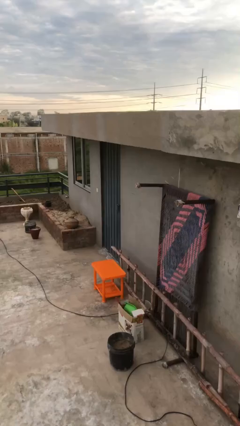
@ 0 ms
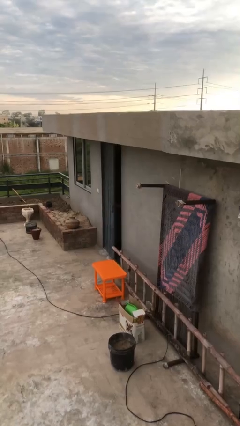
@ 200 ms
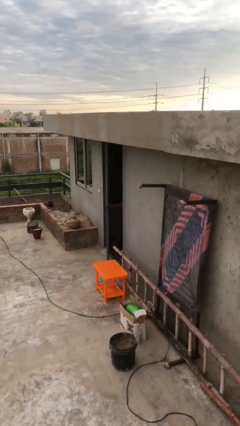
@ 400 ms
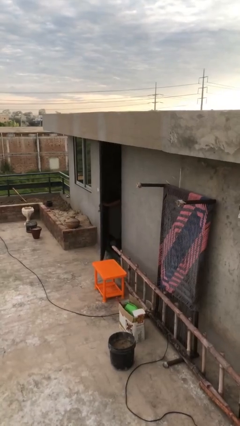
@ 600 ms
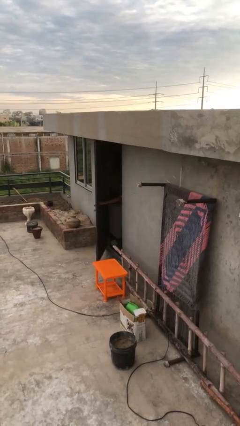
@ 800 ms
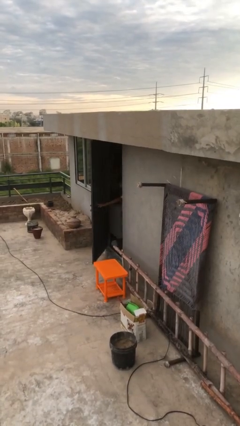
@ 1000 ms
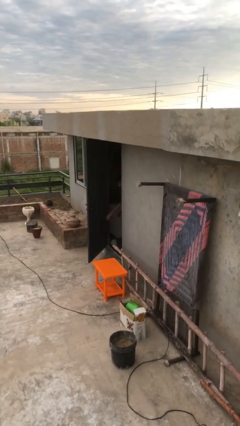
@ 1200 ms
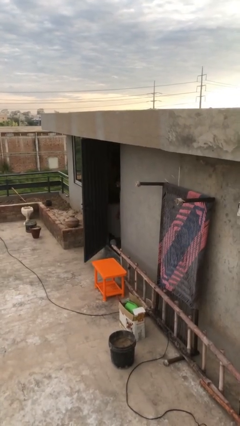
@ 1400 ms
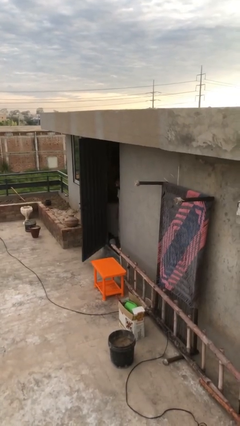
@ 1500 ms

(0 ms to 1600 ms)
person opens facility door

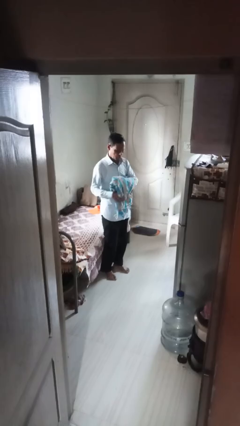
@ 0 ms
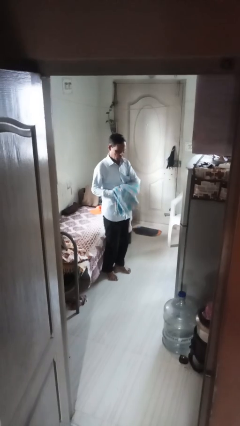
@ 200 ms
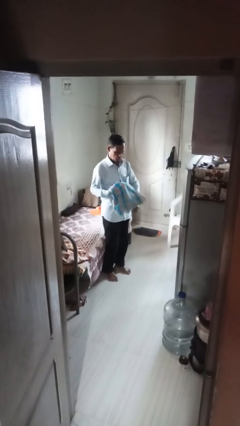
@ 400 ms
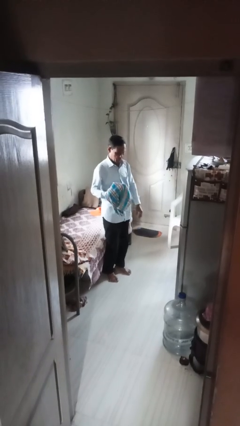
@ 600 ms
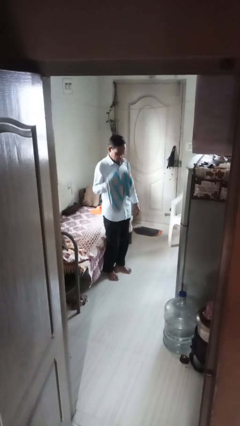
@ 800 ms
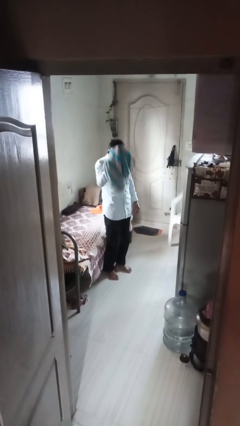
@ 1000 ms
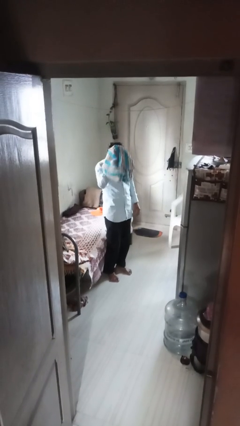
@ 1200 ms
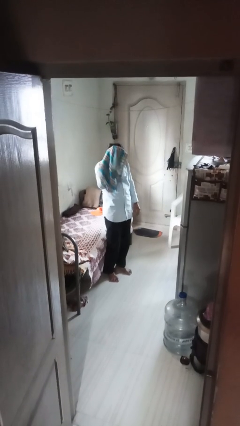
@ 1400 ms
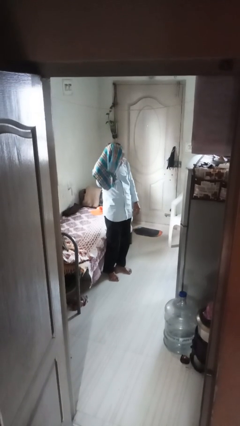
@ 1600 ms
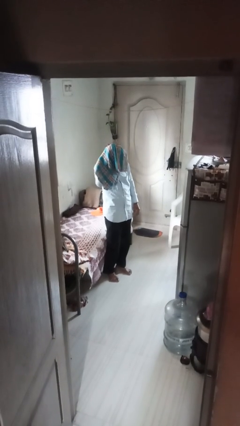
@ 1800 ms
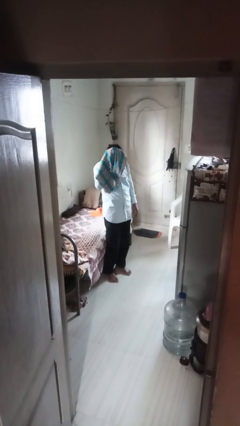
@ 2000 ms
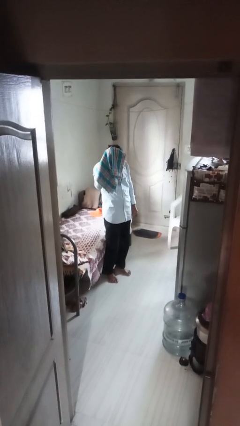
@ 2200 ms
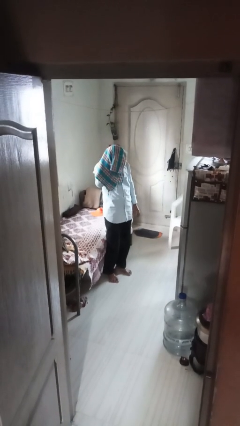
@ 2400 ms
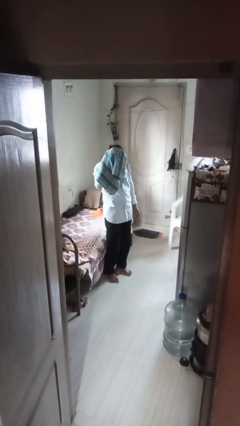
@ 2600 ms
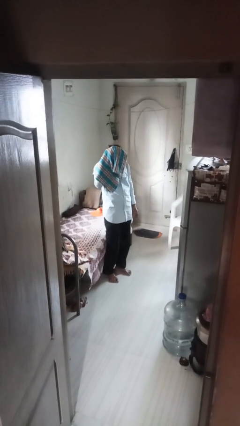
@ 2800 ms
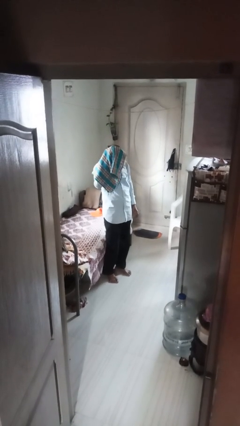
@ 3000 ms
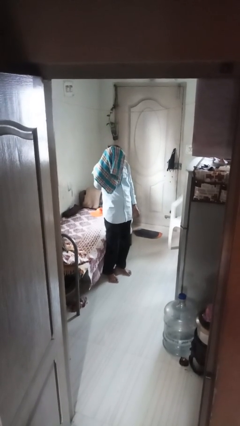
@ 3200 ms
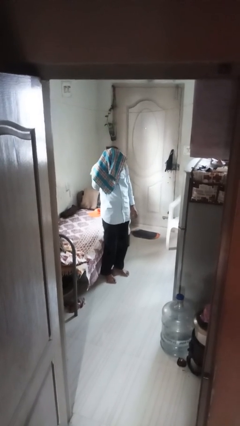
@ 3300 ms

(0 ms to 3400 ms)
person dries hair with towel

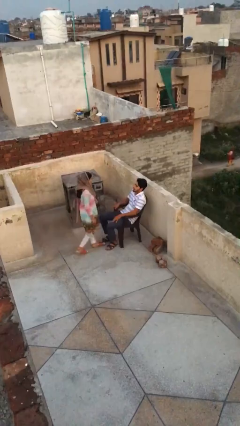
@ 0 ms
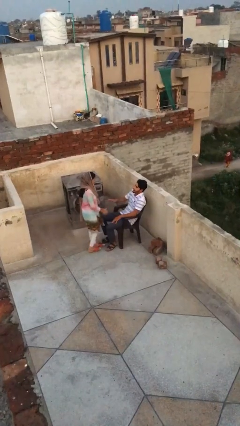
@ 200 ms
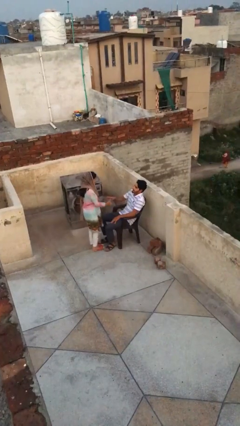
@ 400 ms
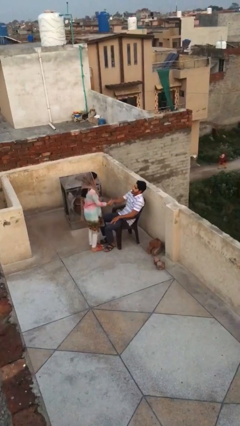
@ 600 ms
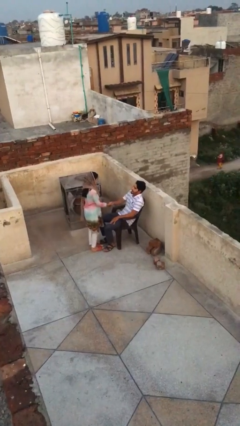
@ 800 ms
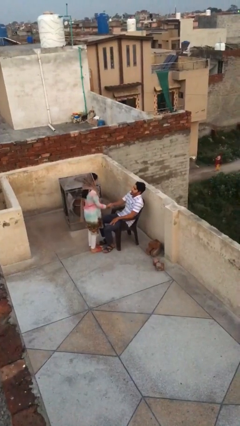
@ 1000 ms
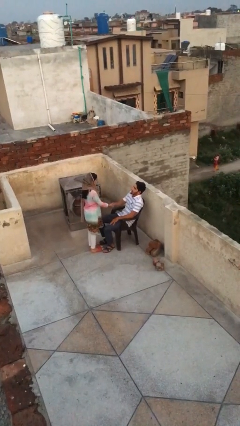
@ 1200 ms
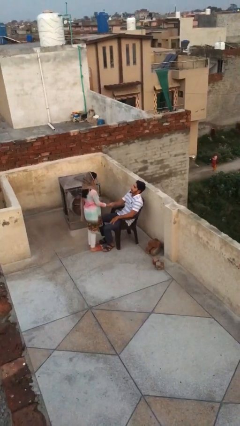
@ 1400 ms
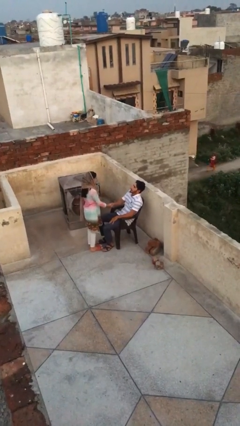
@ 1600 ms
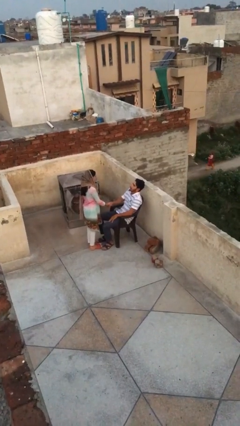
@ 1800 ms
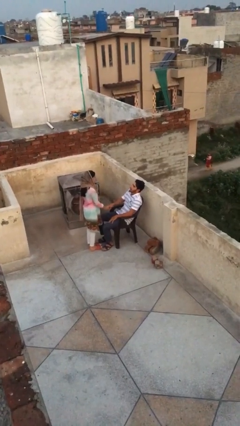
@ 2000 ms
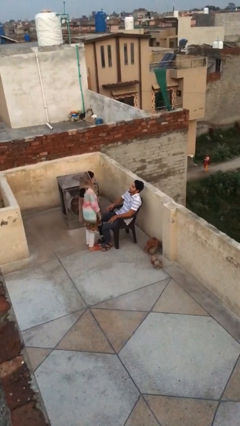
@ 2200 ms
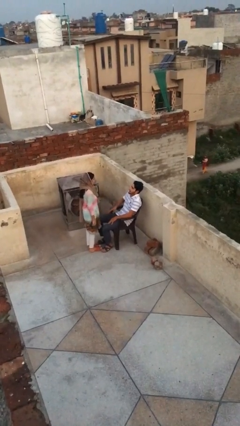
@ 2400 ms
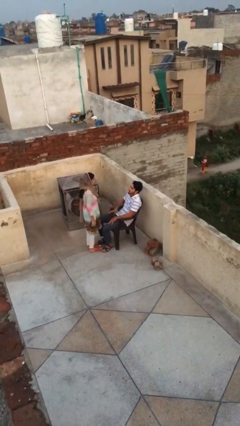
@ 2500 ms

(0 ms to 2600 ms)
person shakes hand

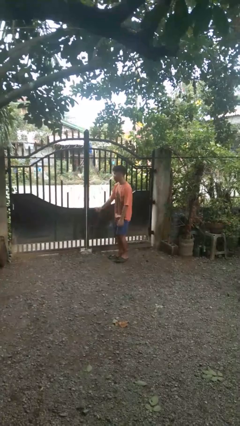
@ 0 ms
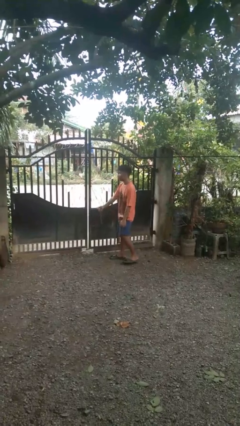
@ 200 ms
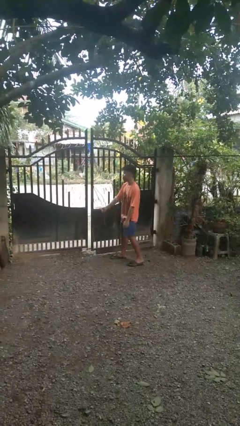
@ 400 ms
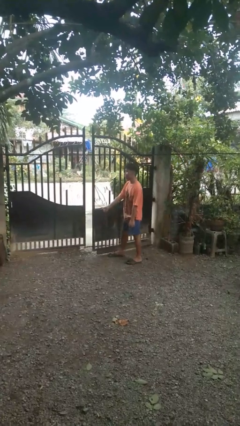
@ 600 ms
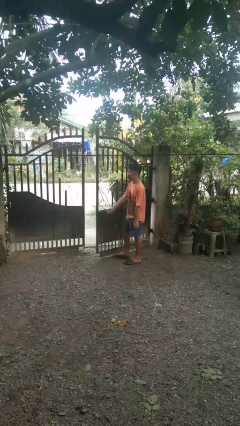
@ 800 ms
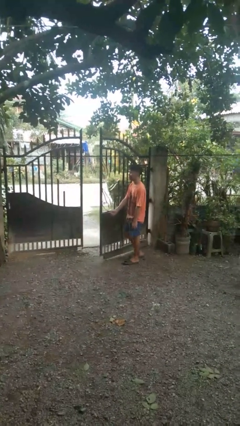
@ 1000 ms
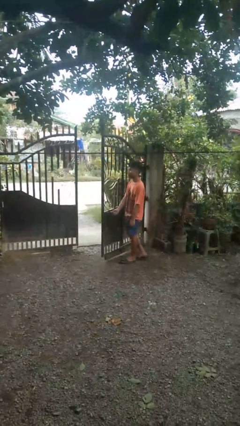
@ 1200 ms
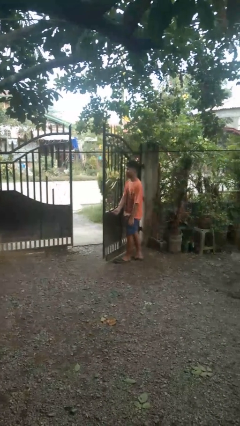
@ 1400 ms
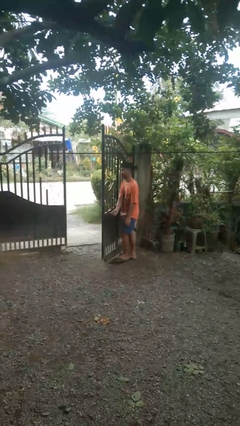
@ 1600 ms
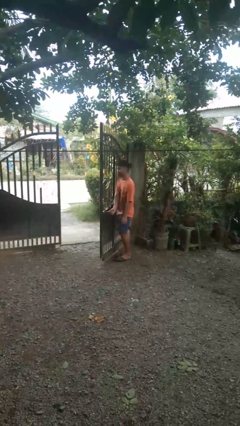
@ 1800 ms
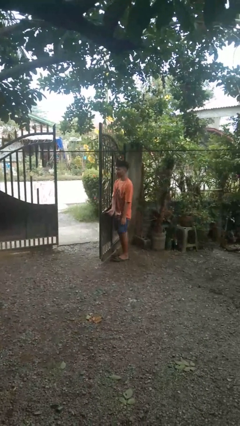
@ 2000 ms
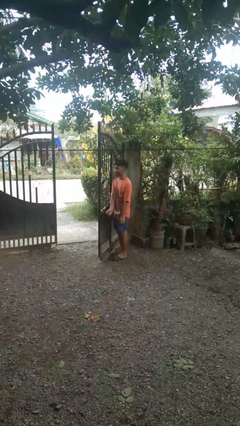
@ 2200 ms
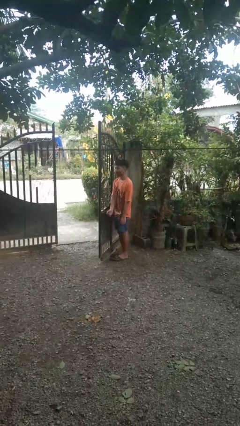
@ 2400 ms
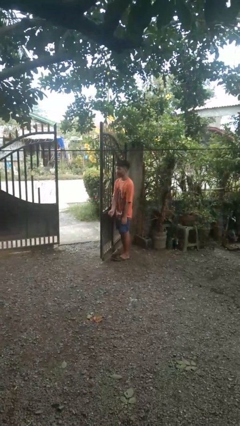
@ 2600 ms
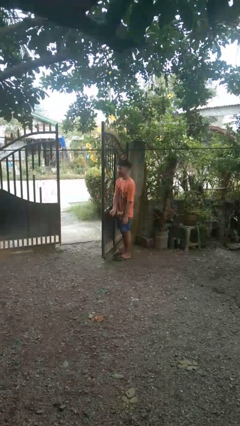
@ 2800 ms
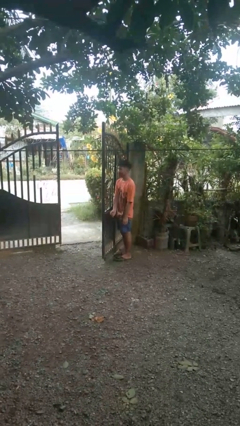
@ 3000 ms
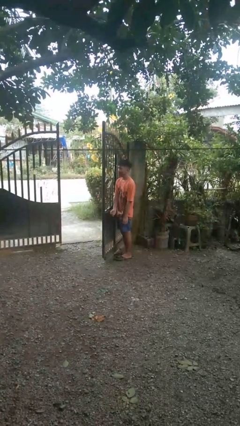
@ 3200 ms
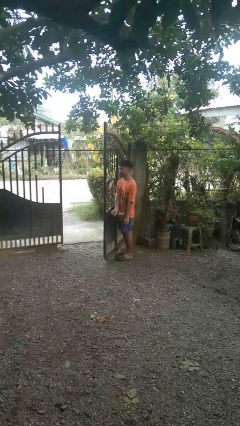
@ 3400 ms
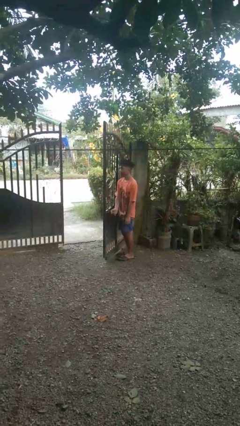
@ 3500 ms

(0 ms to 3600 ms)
person opens gate

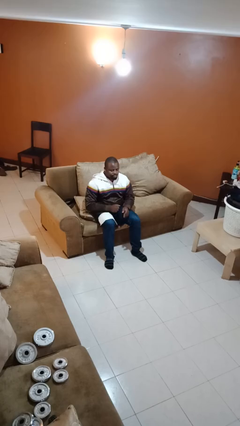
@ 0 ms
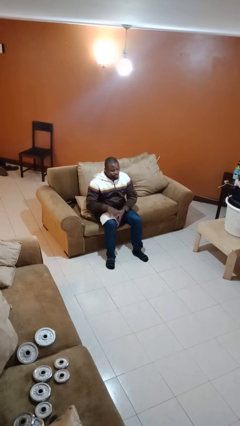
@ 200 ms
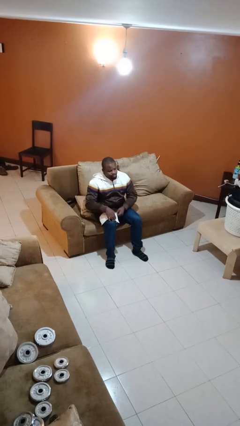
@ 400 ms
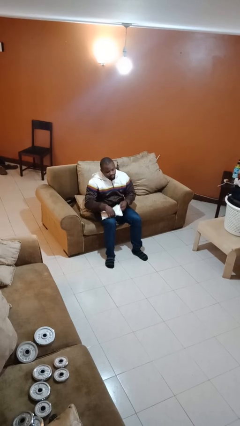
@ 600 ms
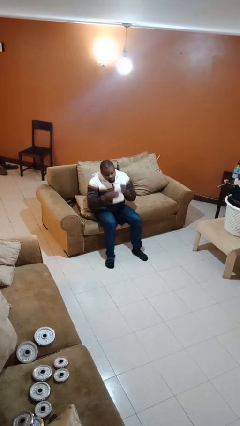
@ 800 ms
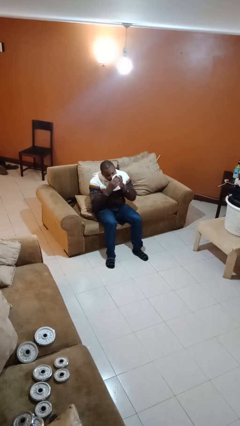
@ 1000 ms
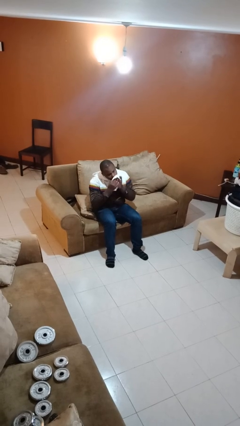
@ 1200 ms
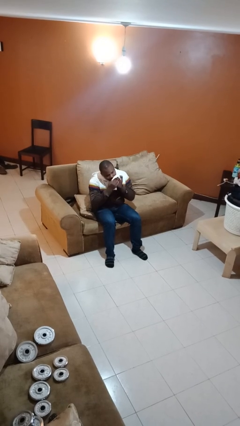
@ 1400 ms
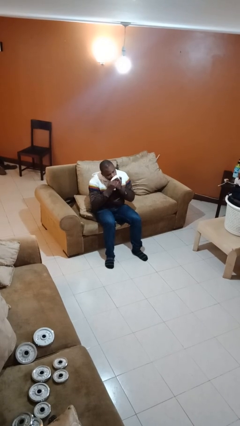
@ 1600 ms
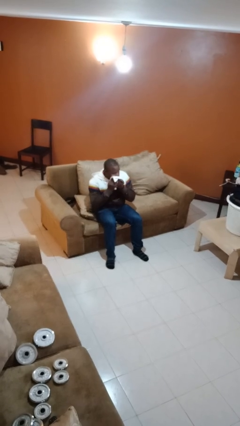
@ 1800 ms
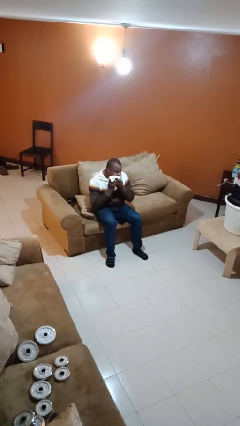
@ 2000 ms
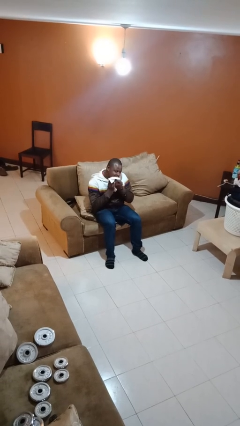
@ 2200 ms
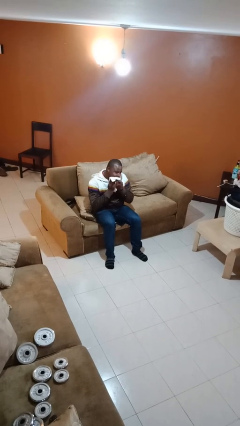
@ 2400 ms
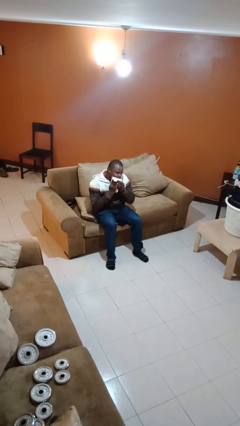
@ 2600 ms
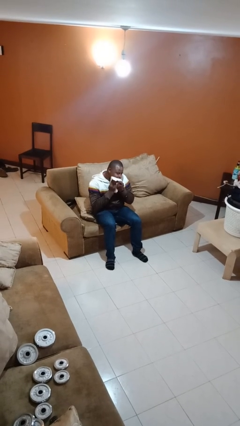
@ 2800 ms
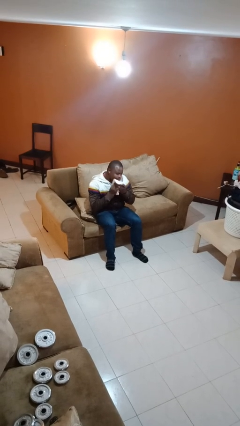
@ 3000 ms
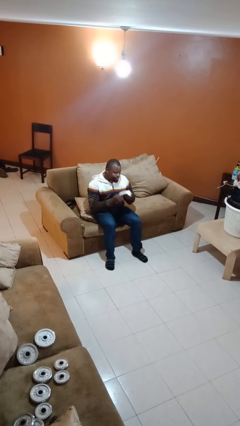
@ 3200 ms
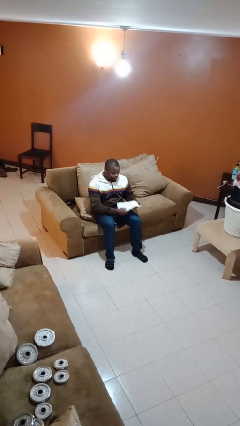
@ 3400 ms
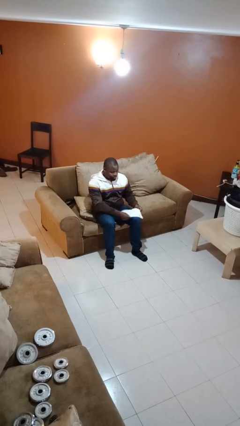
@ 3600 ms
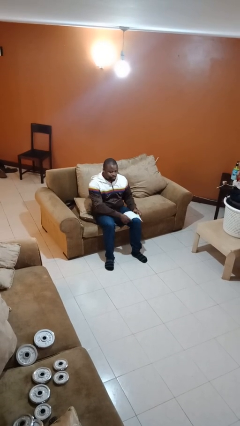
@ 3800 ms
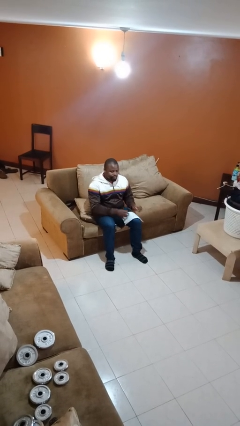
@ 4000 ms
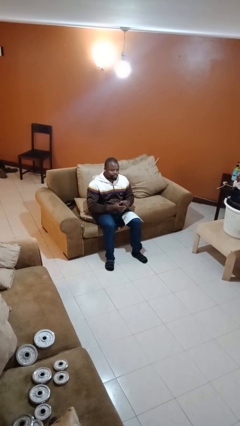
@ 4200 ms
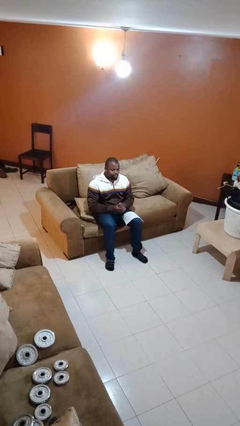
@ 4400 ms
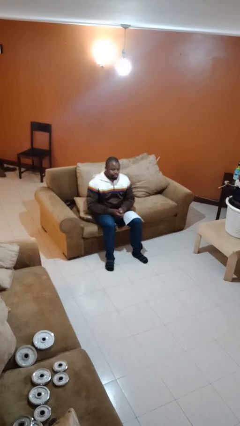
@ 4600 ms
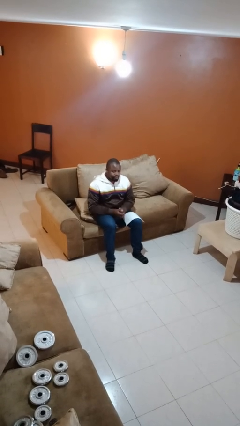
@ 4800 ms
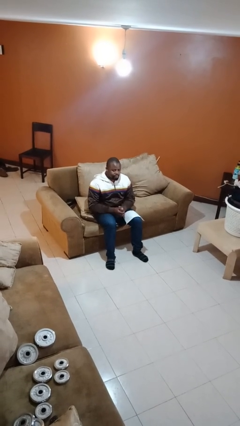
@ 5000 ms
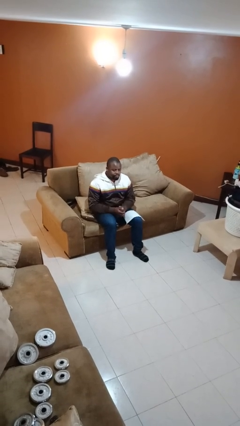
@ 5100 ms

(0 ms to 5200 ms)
person wipes mouth with napkin

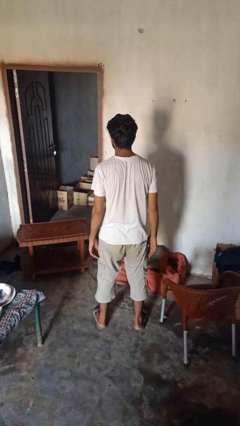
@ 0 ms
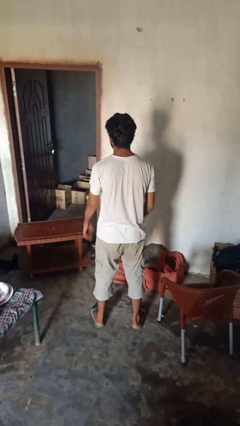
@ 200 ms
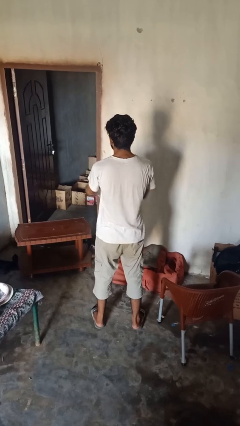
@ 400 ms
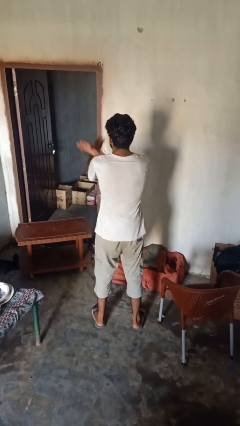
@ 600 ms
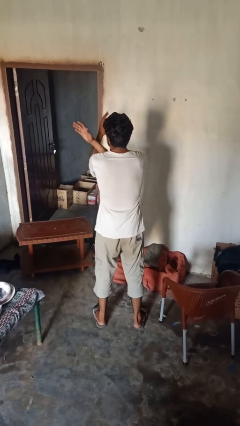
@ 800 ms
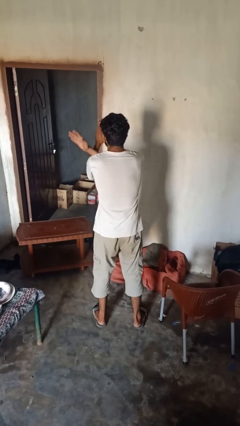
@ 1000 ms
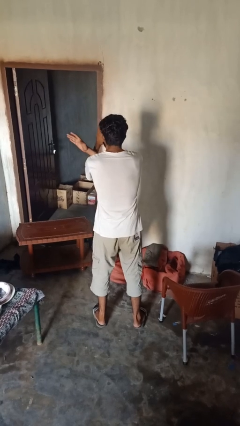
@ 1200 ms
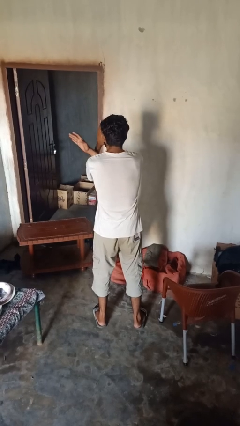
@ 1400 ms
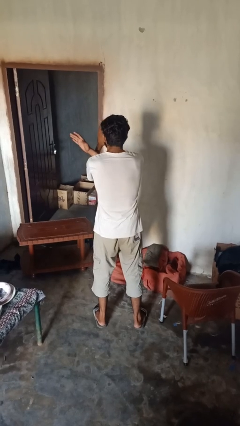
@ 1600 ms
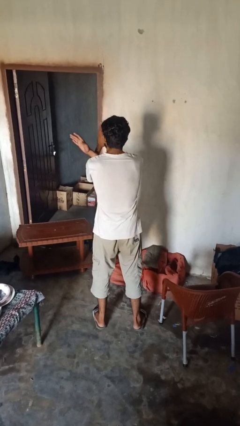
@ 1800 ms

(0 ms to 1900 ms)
person crosses arms
